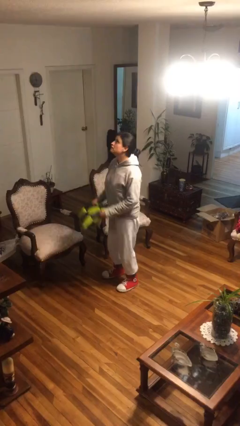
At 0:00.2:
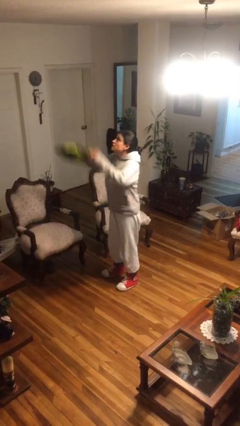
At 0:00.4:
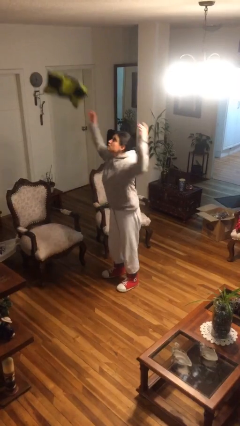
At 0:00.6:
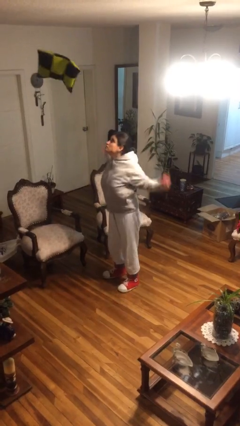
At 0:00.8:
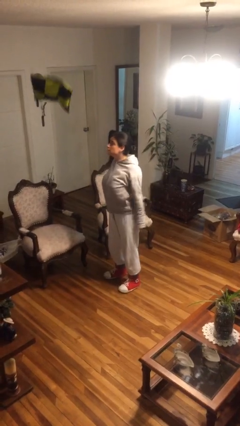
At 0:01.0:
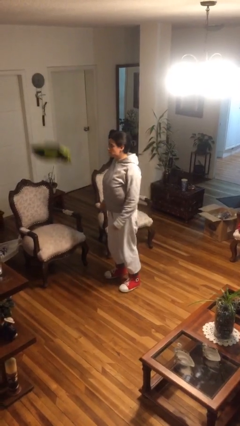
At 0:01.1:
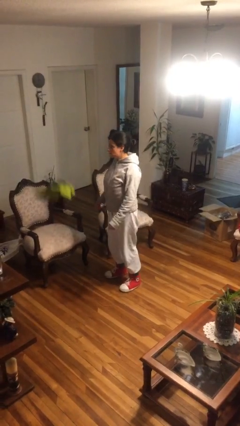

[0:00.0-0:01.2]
person throws object into air

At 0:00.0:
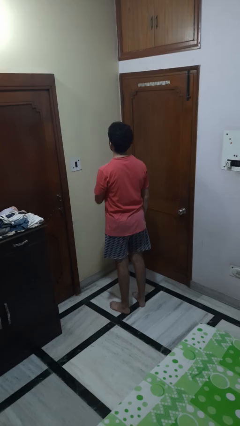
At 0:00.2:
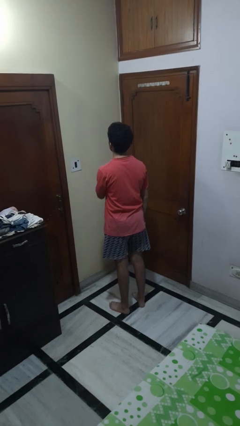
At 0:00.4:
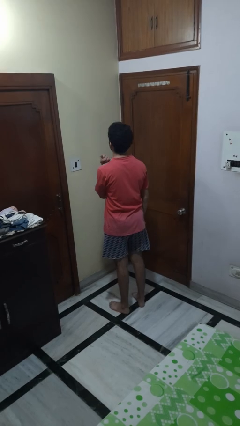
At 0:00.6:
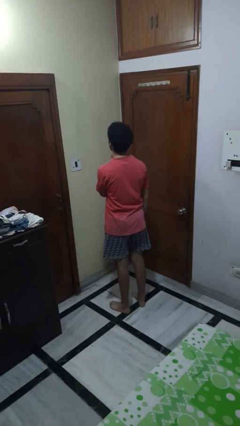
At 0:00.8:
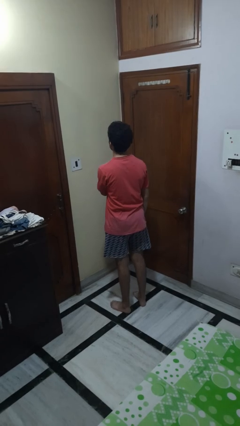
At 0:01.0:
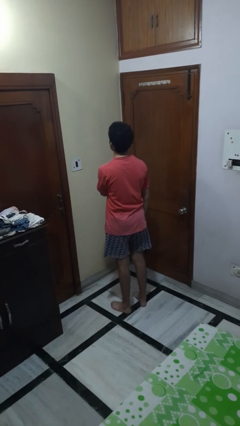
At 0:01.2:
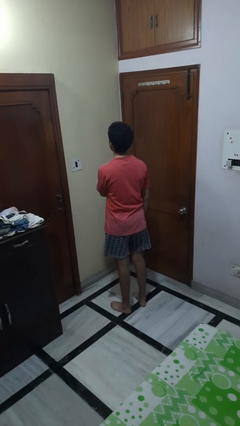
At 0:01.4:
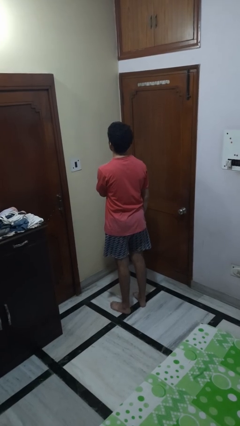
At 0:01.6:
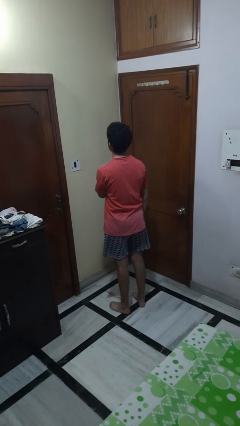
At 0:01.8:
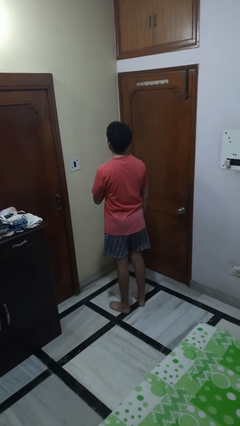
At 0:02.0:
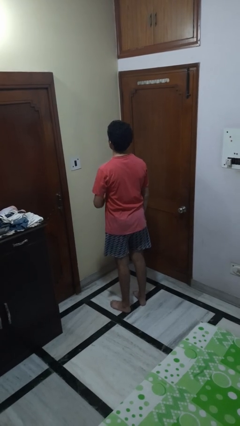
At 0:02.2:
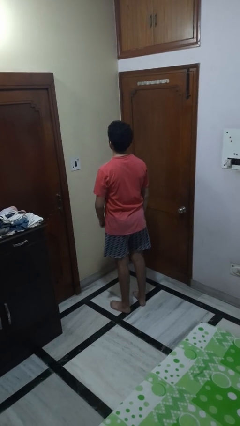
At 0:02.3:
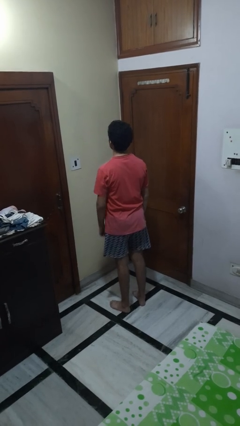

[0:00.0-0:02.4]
person gestures cut

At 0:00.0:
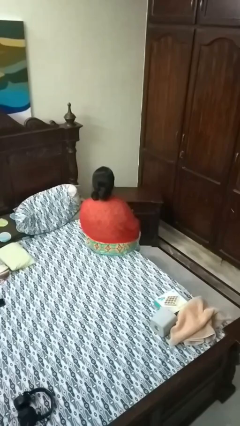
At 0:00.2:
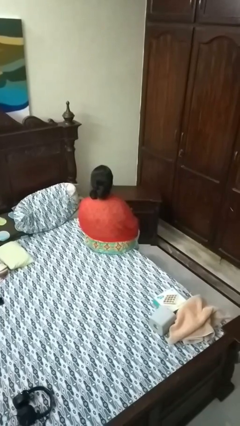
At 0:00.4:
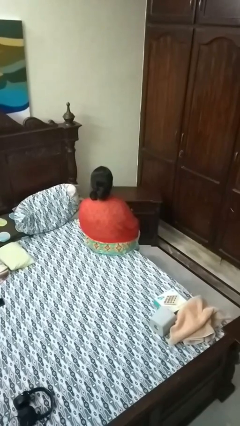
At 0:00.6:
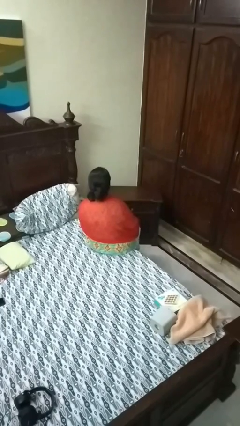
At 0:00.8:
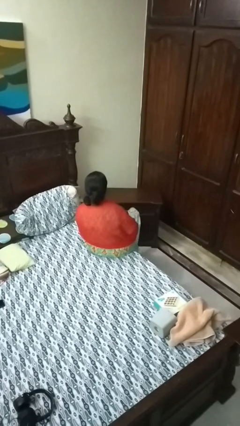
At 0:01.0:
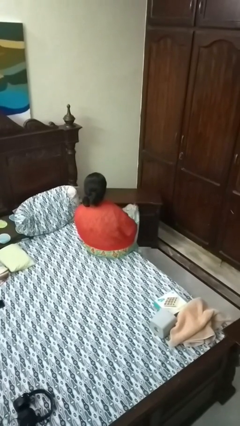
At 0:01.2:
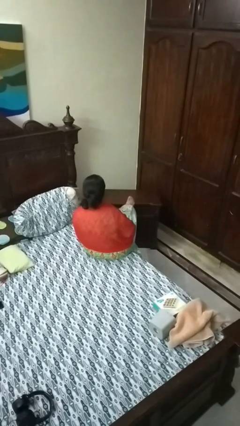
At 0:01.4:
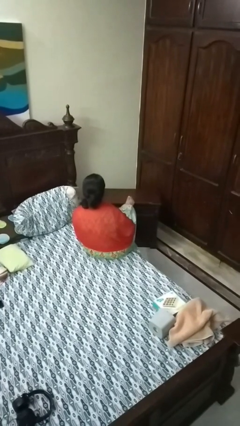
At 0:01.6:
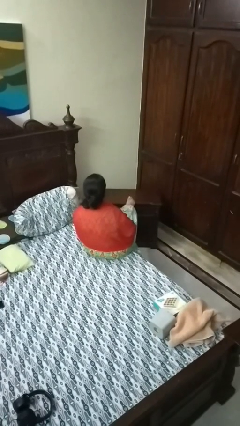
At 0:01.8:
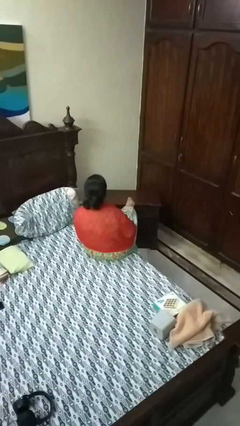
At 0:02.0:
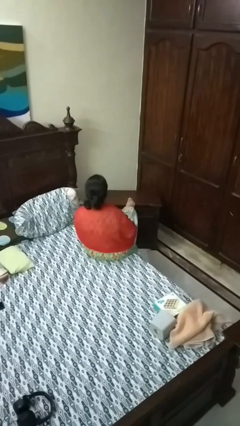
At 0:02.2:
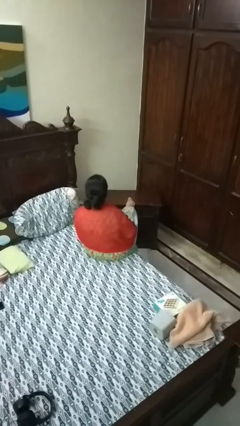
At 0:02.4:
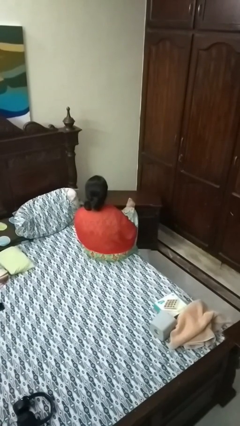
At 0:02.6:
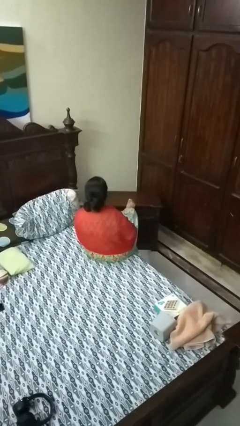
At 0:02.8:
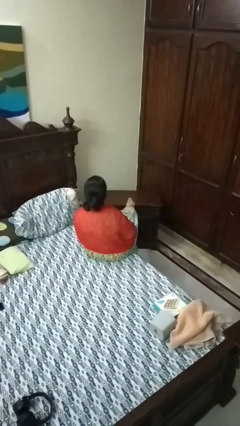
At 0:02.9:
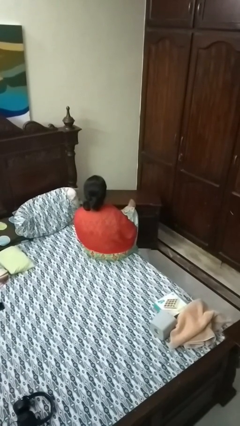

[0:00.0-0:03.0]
person puts feet up

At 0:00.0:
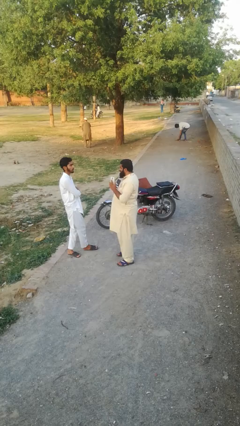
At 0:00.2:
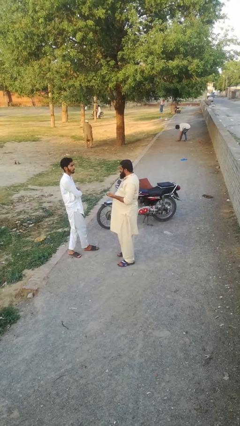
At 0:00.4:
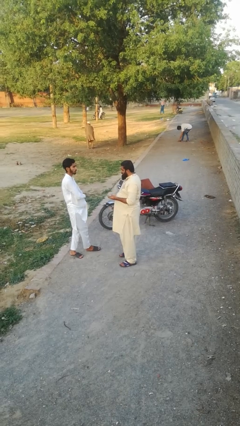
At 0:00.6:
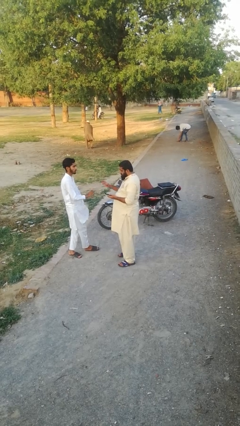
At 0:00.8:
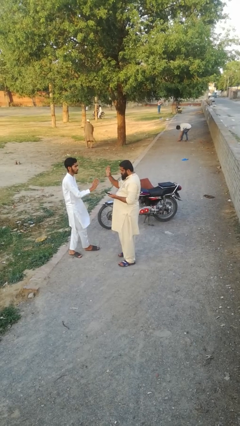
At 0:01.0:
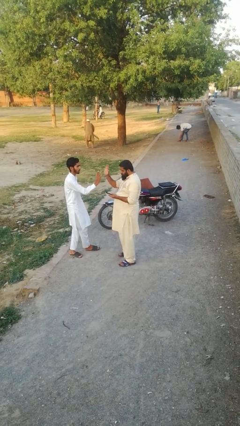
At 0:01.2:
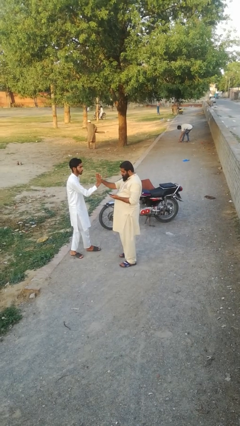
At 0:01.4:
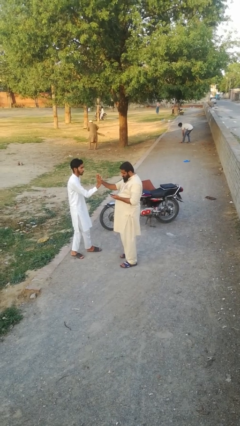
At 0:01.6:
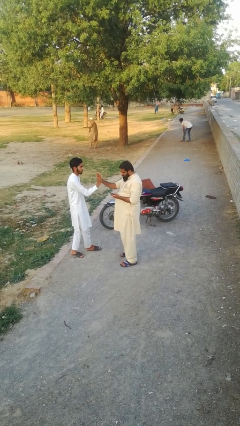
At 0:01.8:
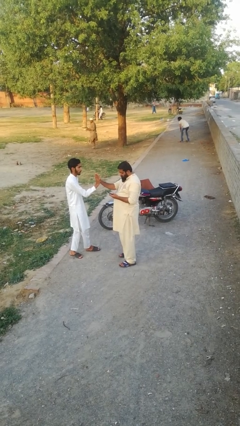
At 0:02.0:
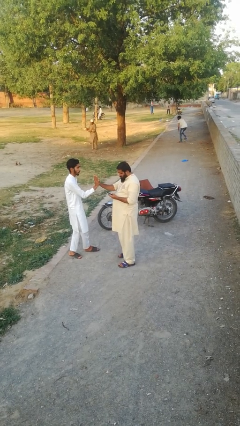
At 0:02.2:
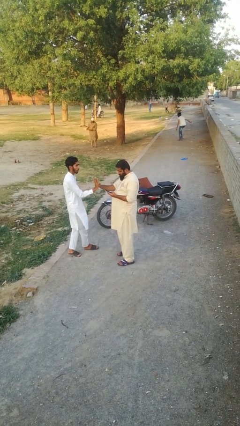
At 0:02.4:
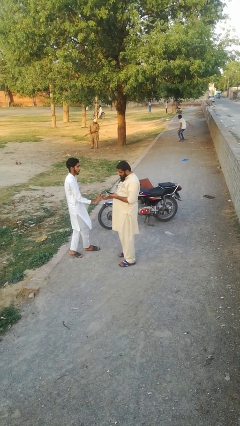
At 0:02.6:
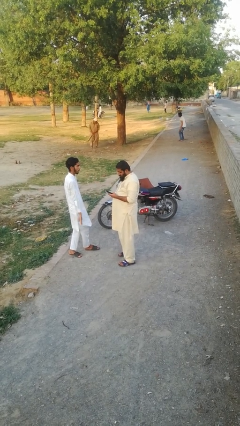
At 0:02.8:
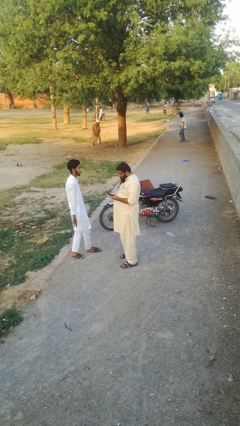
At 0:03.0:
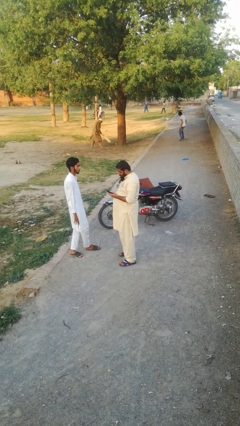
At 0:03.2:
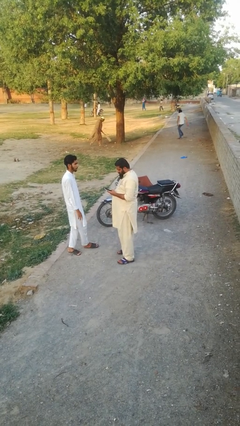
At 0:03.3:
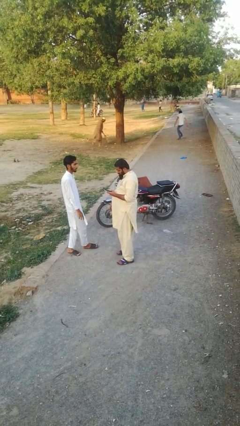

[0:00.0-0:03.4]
person highfives hand

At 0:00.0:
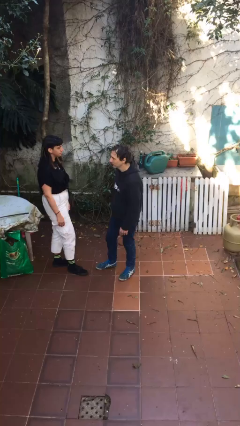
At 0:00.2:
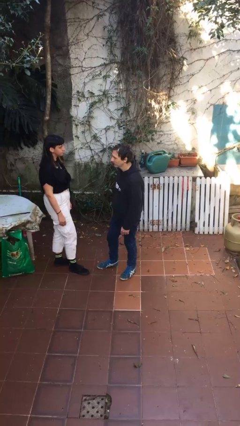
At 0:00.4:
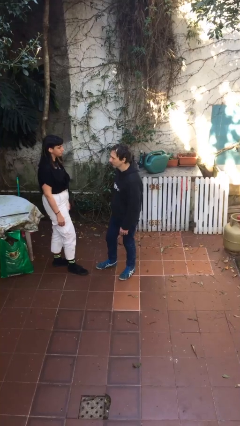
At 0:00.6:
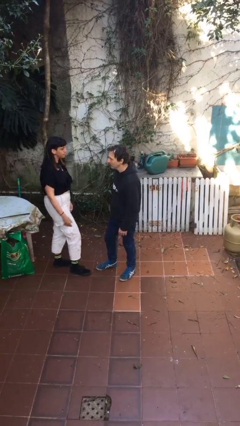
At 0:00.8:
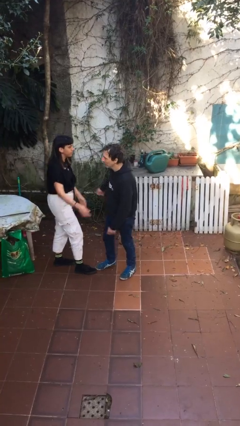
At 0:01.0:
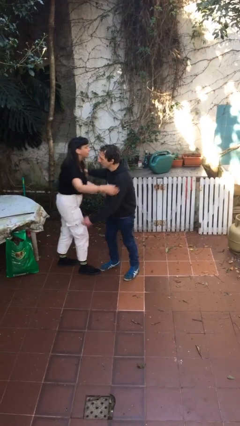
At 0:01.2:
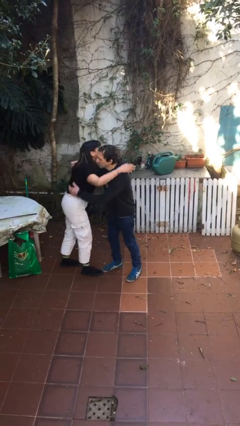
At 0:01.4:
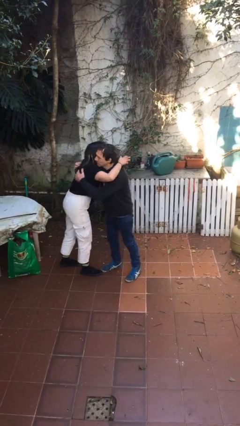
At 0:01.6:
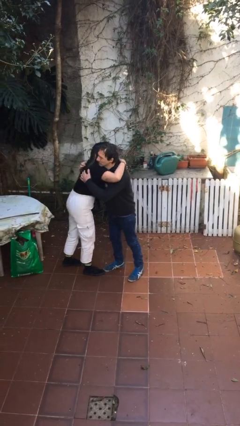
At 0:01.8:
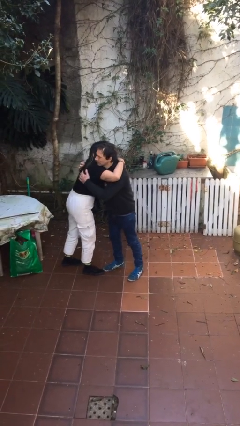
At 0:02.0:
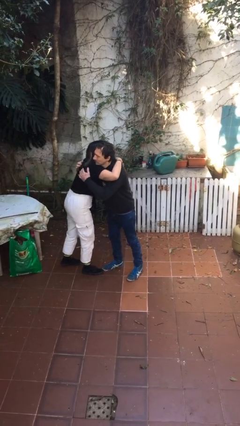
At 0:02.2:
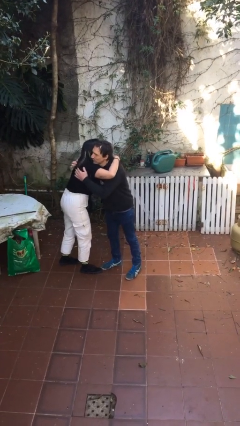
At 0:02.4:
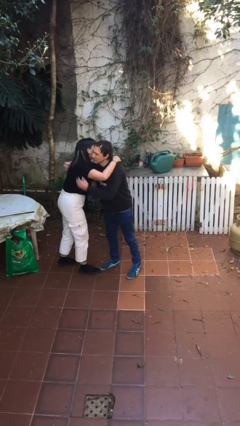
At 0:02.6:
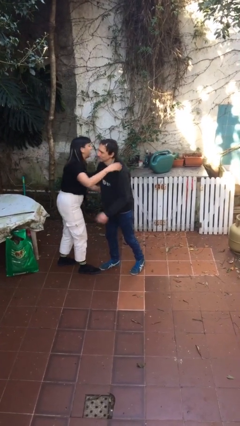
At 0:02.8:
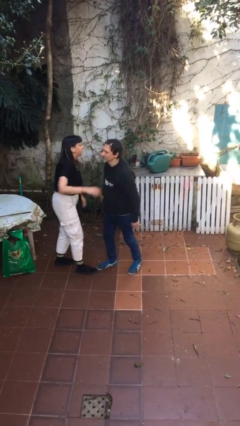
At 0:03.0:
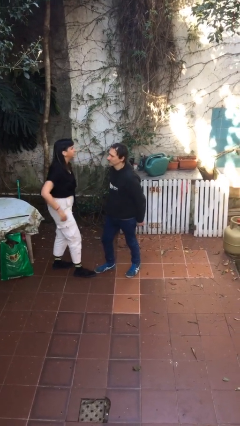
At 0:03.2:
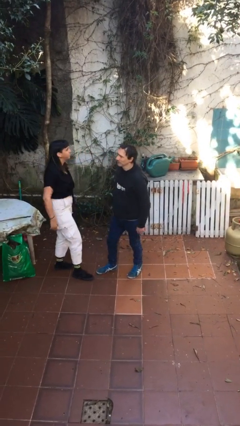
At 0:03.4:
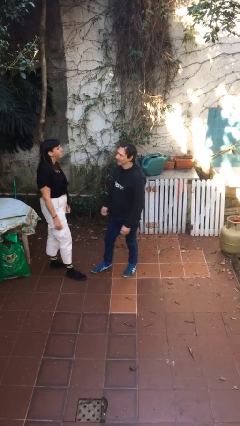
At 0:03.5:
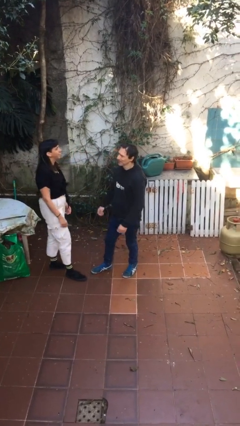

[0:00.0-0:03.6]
person embraces person

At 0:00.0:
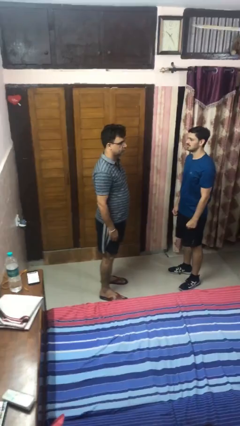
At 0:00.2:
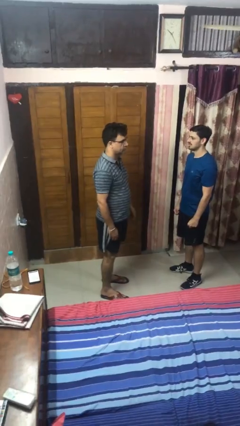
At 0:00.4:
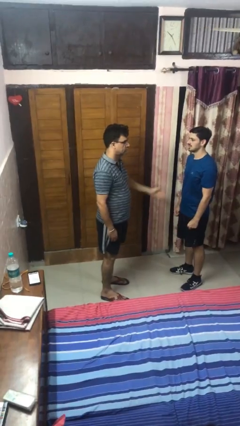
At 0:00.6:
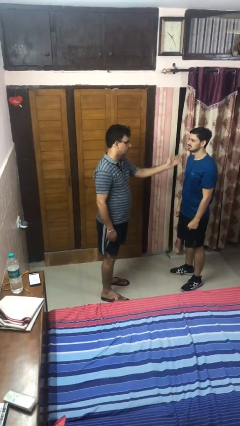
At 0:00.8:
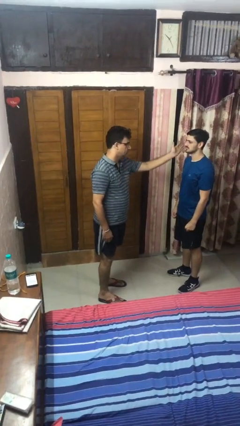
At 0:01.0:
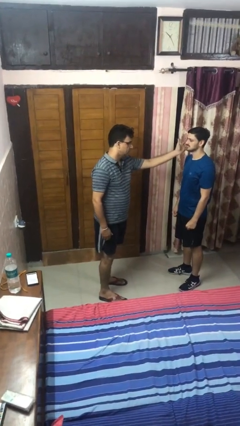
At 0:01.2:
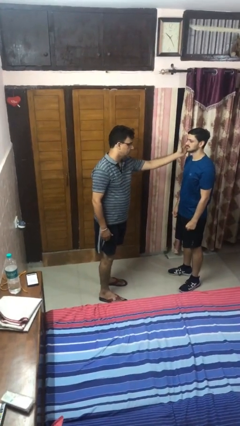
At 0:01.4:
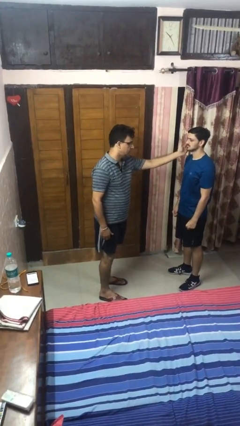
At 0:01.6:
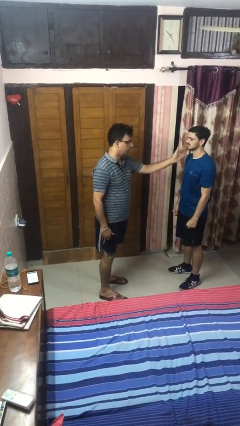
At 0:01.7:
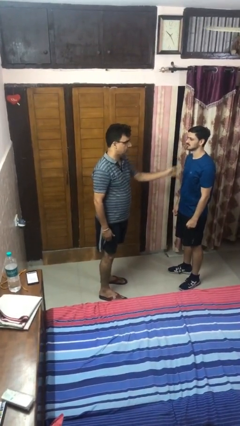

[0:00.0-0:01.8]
person touches face of person

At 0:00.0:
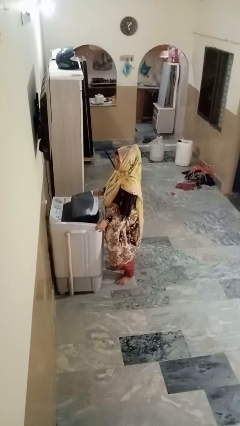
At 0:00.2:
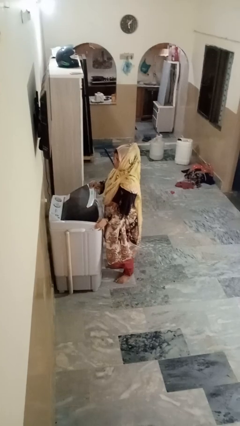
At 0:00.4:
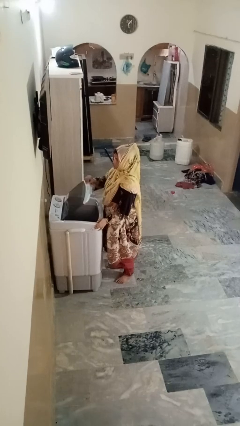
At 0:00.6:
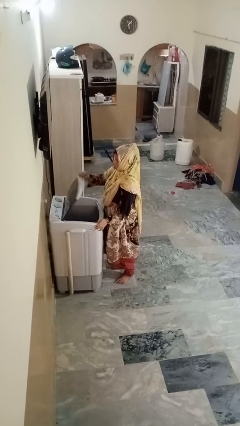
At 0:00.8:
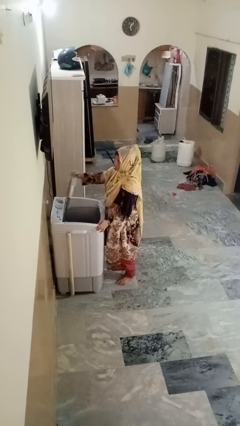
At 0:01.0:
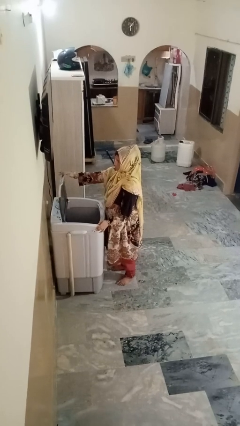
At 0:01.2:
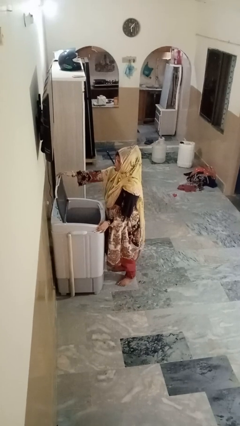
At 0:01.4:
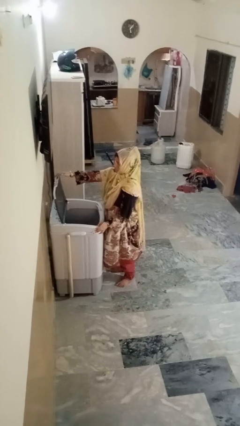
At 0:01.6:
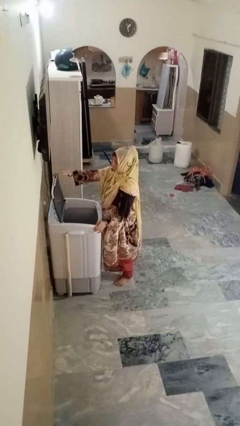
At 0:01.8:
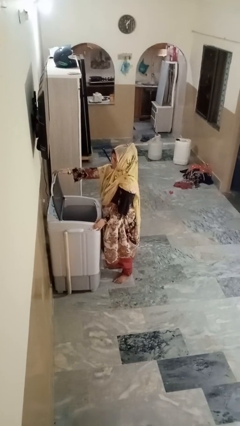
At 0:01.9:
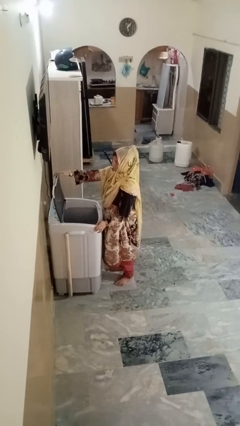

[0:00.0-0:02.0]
person opens clothes washer
